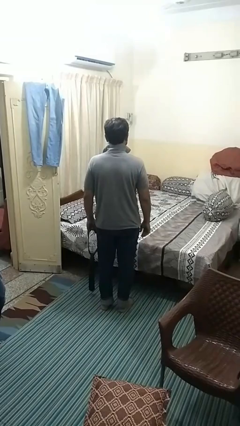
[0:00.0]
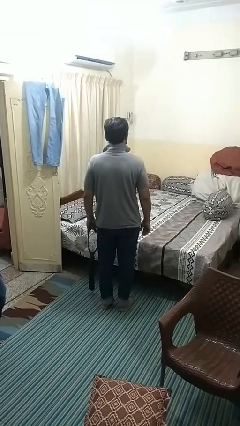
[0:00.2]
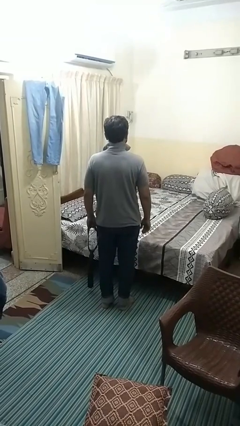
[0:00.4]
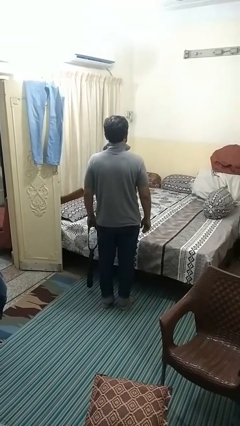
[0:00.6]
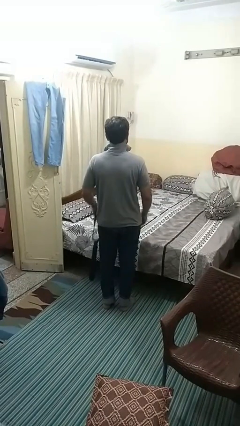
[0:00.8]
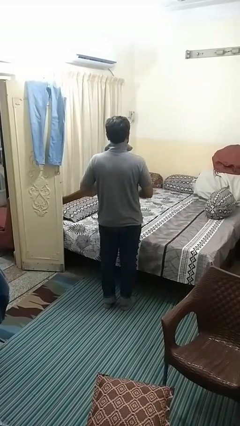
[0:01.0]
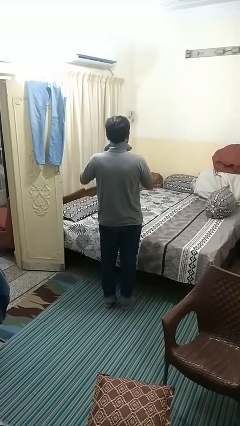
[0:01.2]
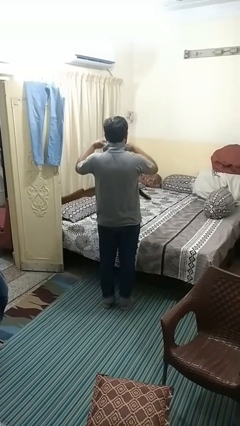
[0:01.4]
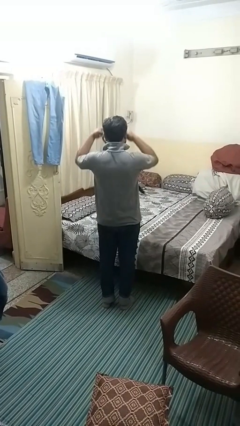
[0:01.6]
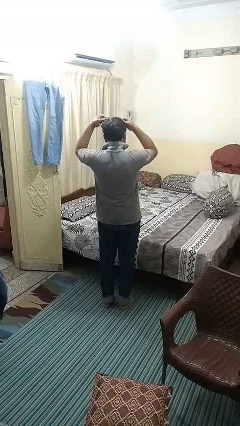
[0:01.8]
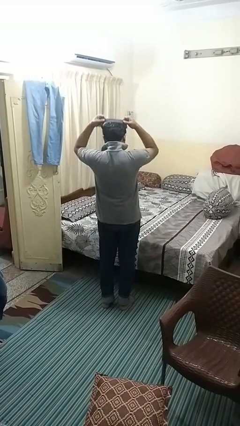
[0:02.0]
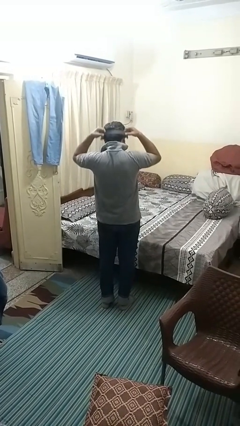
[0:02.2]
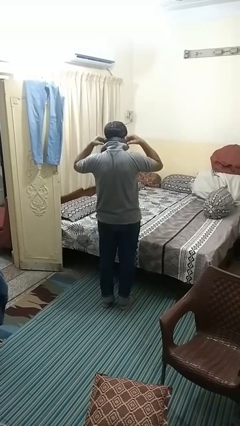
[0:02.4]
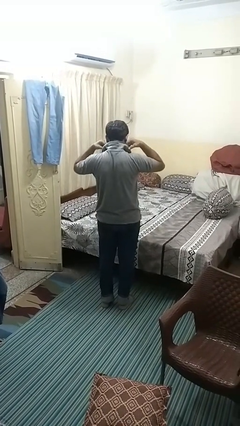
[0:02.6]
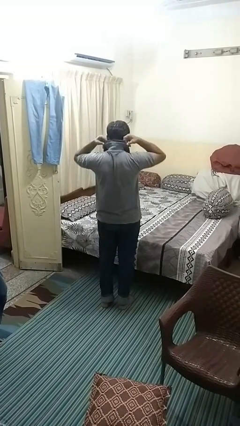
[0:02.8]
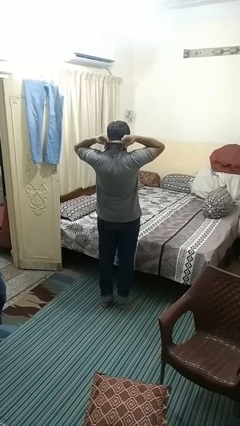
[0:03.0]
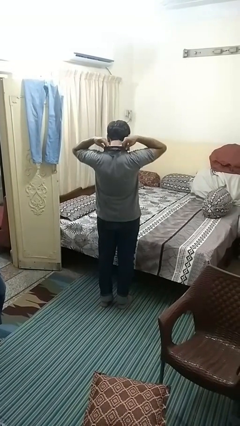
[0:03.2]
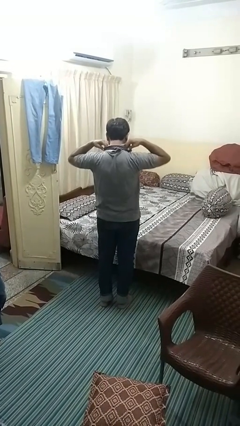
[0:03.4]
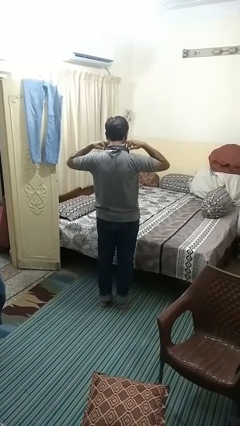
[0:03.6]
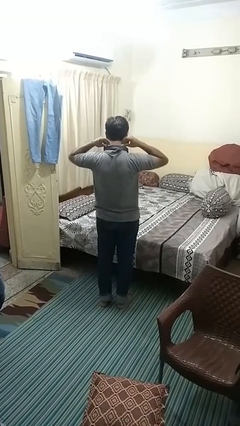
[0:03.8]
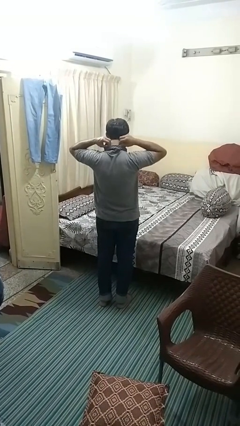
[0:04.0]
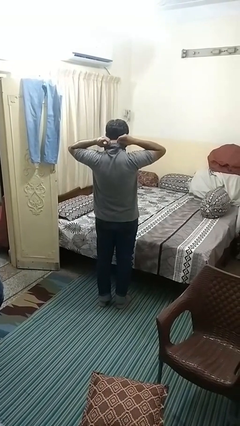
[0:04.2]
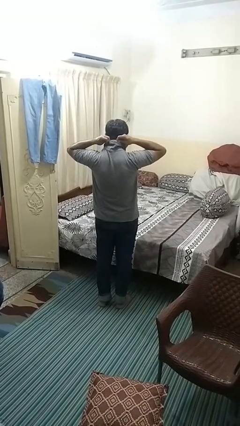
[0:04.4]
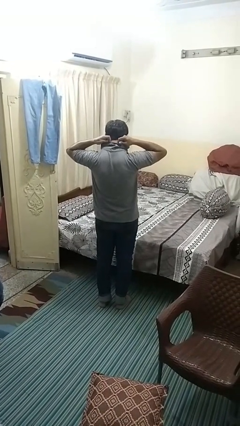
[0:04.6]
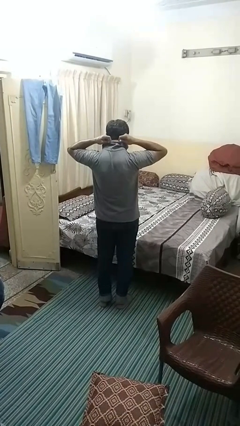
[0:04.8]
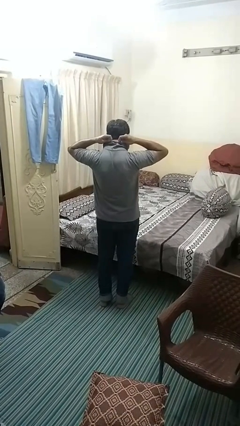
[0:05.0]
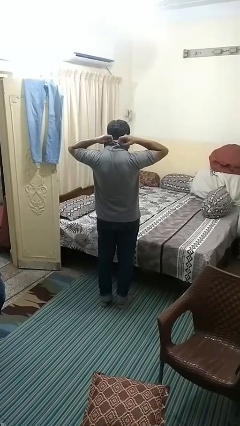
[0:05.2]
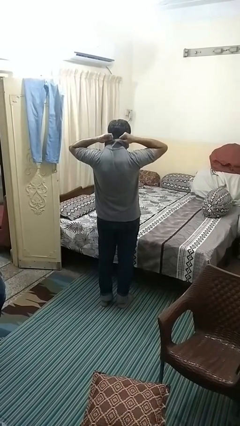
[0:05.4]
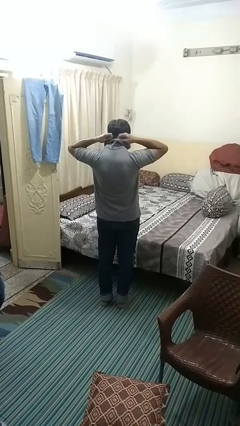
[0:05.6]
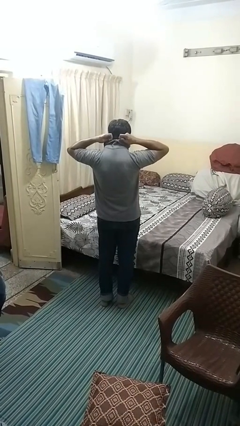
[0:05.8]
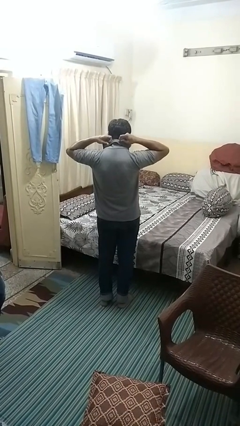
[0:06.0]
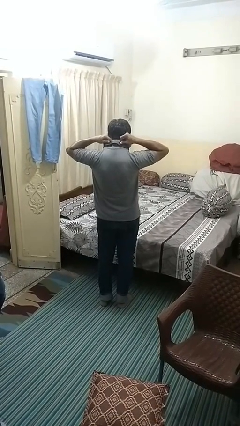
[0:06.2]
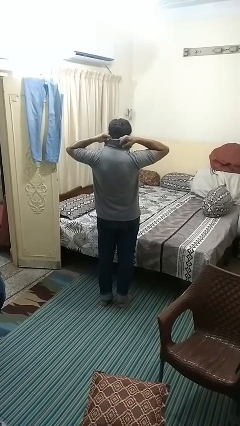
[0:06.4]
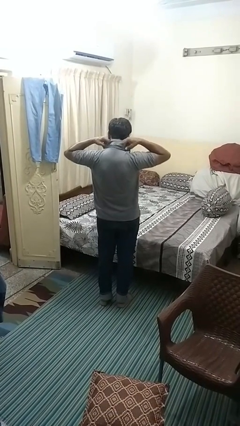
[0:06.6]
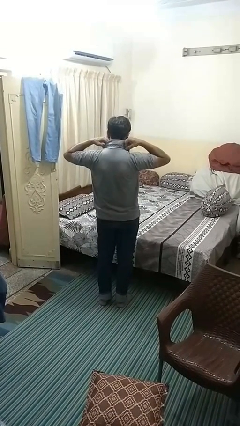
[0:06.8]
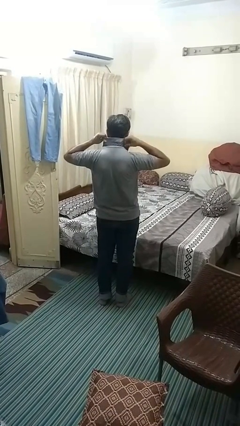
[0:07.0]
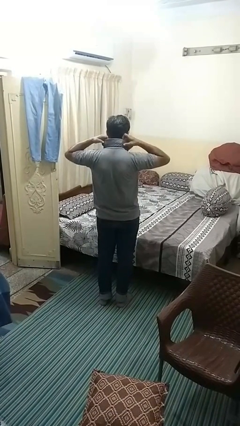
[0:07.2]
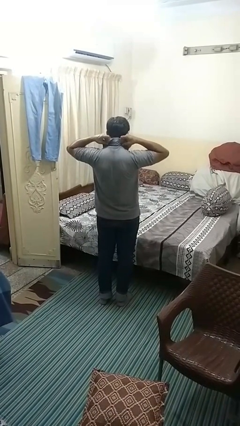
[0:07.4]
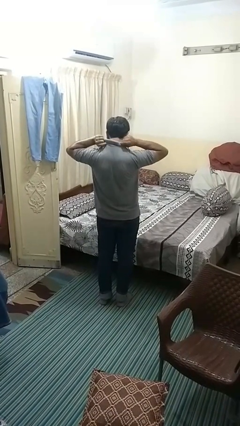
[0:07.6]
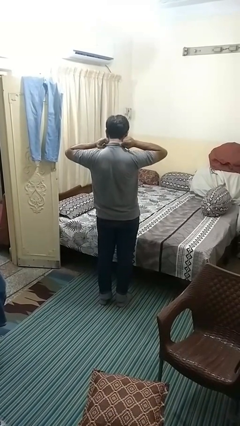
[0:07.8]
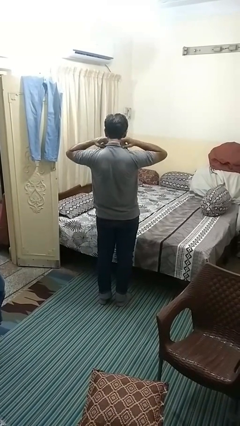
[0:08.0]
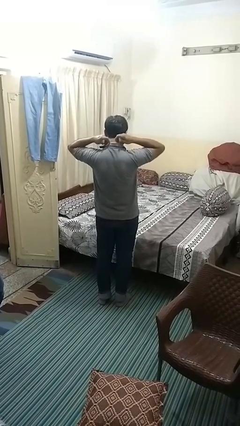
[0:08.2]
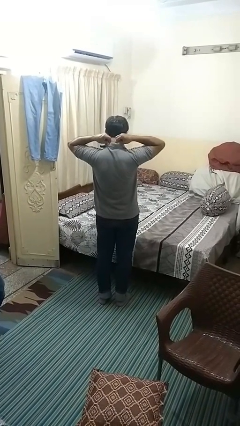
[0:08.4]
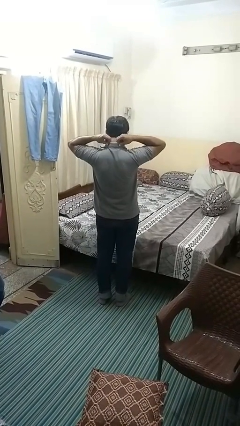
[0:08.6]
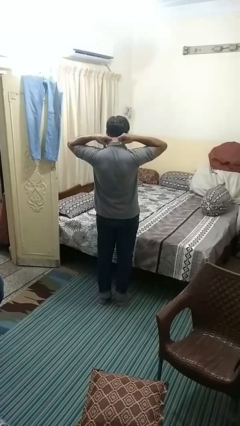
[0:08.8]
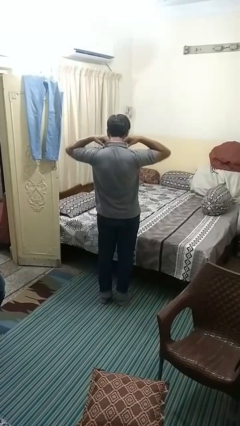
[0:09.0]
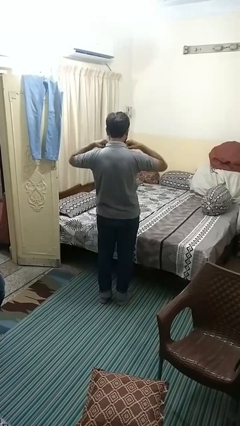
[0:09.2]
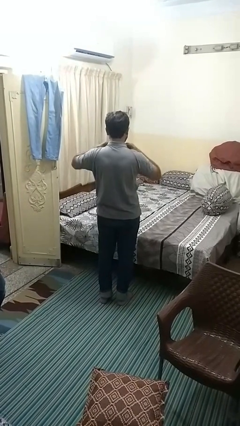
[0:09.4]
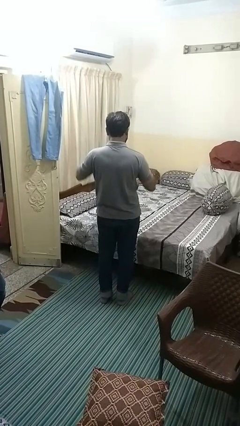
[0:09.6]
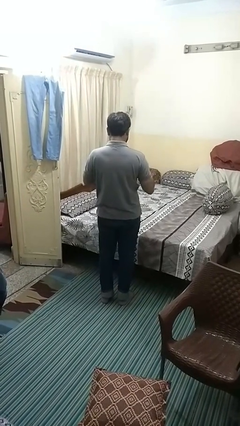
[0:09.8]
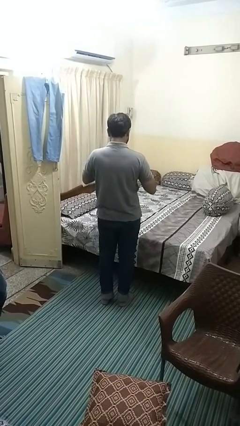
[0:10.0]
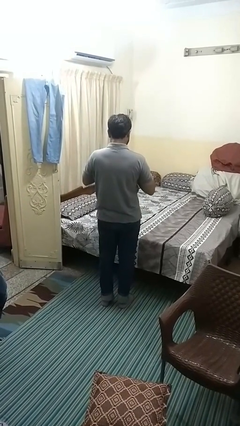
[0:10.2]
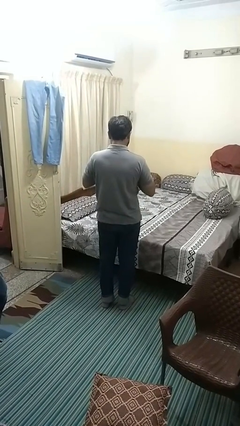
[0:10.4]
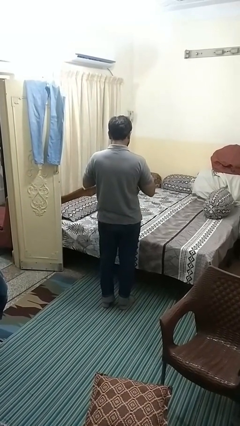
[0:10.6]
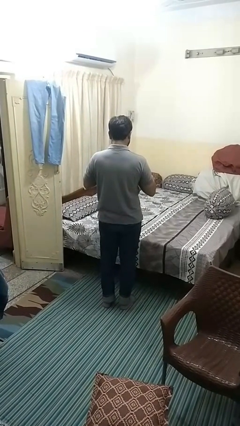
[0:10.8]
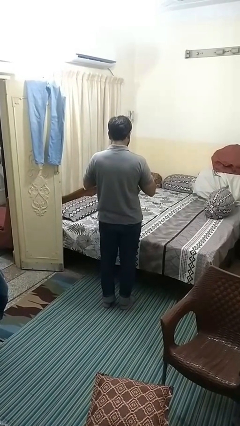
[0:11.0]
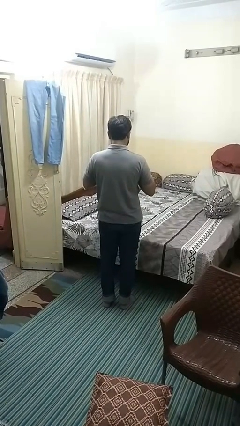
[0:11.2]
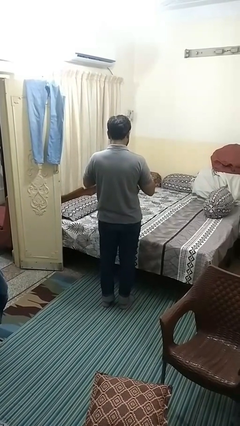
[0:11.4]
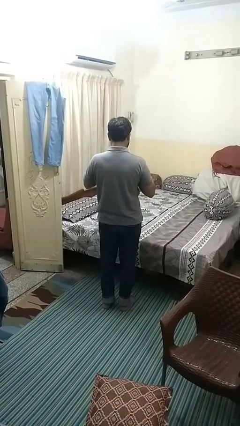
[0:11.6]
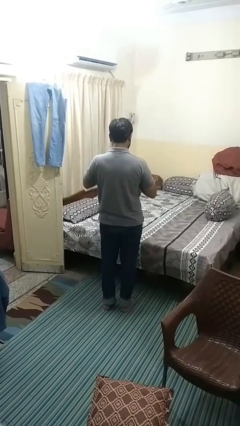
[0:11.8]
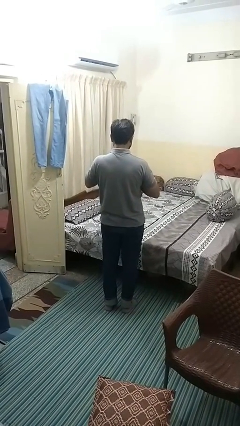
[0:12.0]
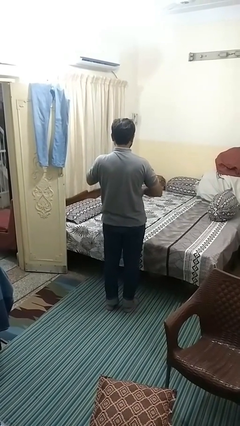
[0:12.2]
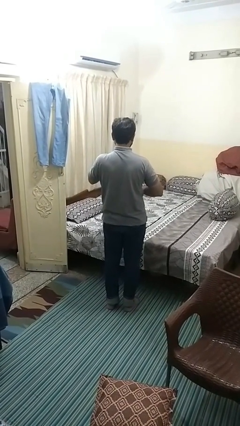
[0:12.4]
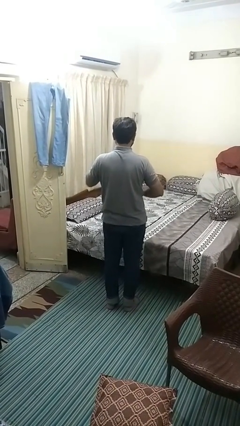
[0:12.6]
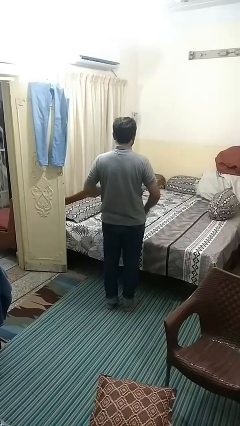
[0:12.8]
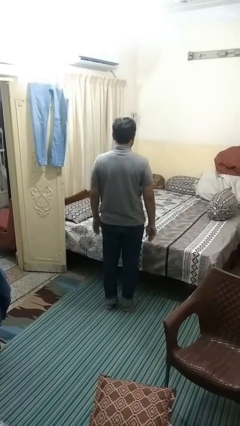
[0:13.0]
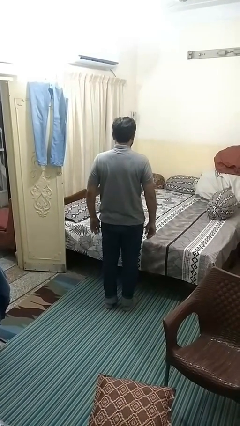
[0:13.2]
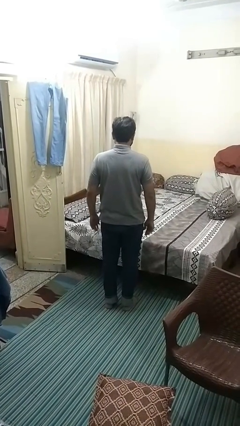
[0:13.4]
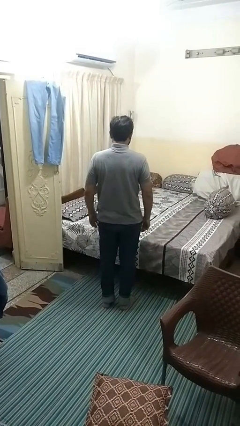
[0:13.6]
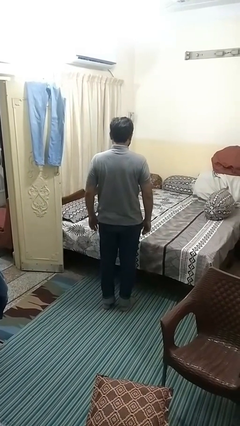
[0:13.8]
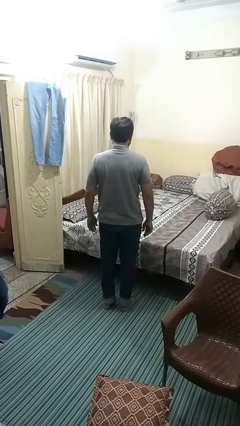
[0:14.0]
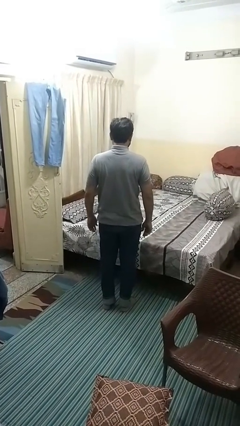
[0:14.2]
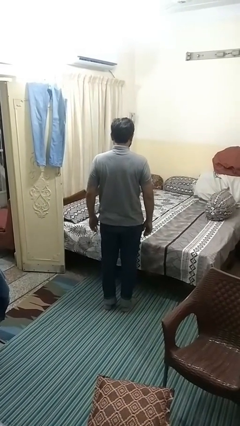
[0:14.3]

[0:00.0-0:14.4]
person puts on necktie

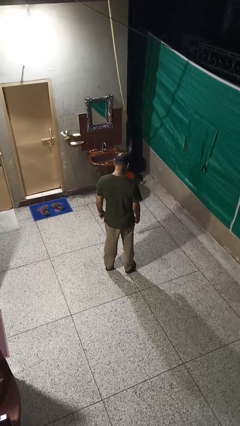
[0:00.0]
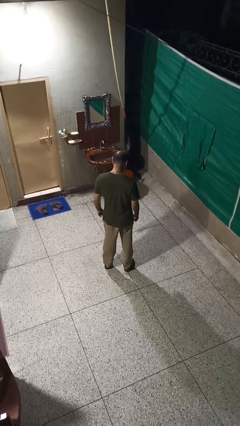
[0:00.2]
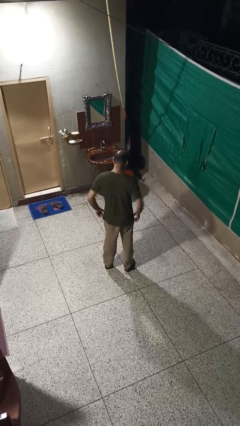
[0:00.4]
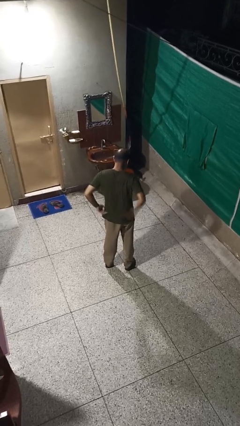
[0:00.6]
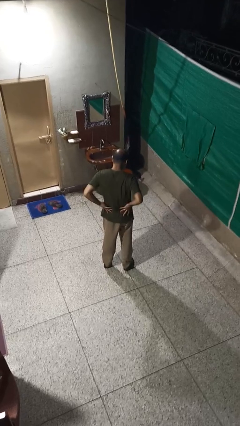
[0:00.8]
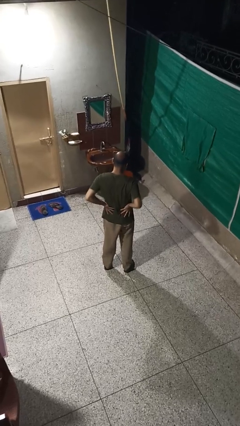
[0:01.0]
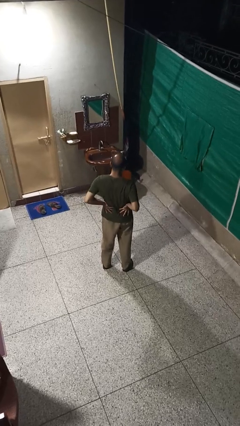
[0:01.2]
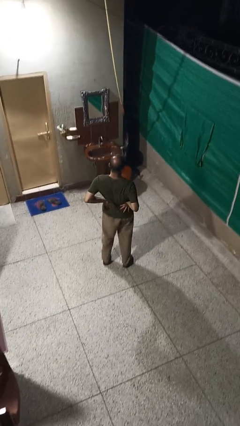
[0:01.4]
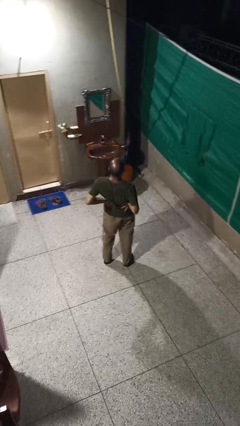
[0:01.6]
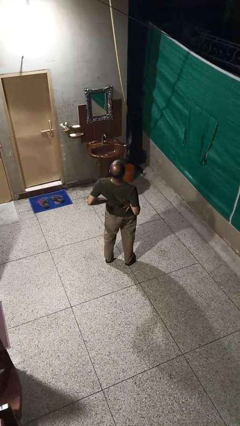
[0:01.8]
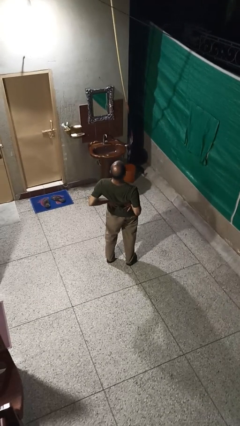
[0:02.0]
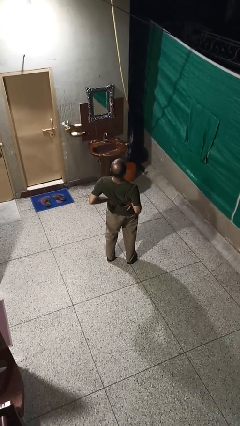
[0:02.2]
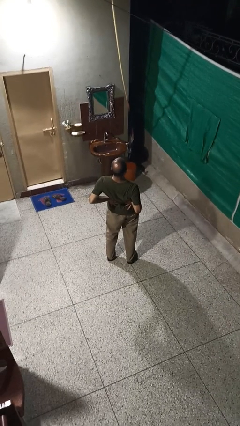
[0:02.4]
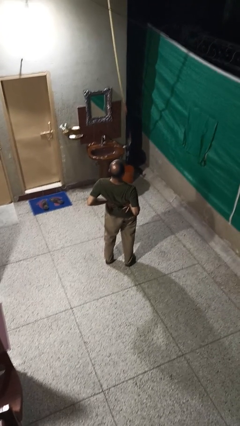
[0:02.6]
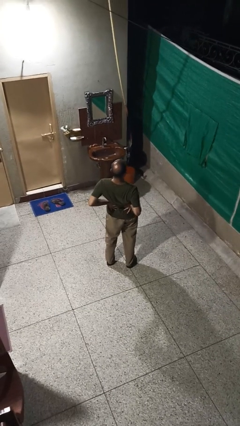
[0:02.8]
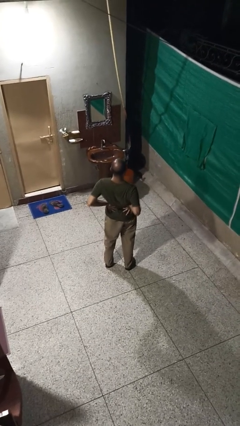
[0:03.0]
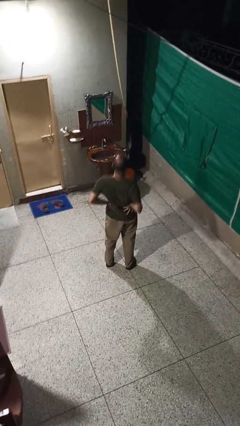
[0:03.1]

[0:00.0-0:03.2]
person stretches back

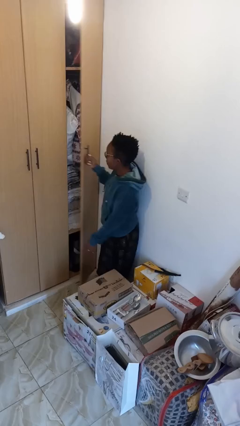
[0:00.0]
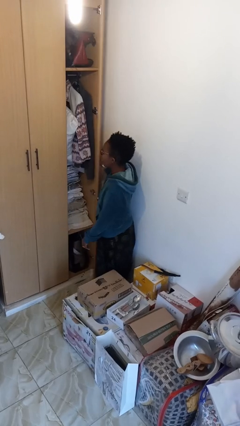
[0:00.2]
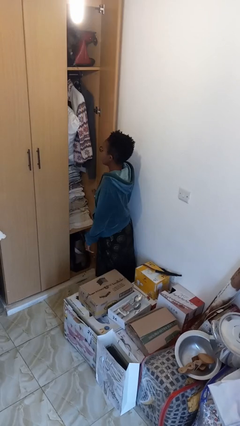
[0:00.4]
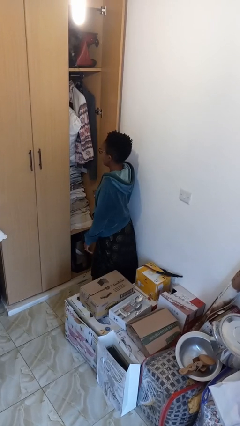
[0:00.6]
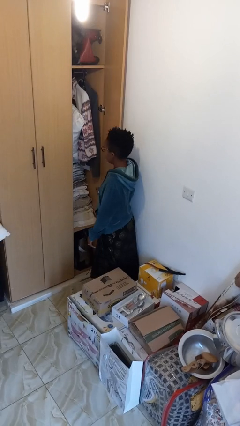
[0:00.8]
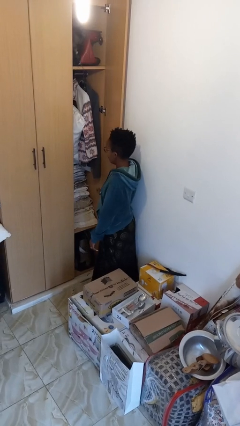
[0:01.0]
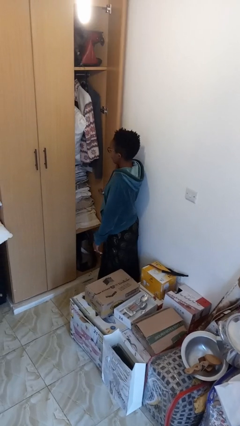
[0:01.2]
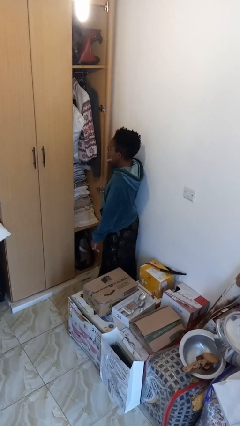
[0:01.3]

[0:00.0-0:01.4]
person opens closet door
